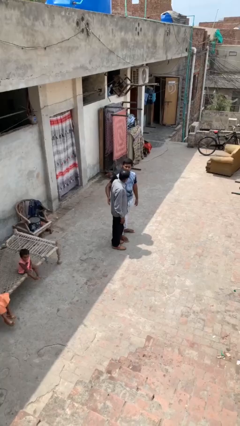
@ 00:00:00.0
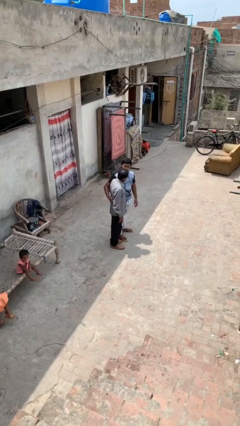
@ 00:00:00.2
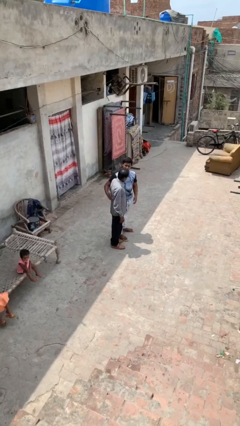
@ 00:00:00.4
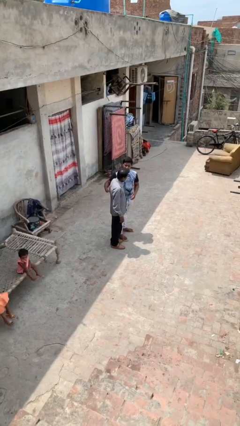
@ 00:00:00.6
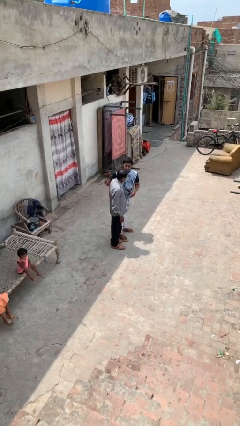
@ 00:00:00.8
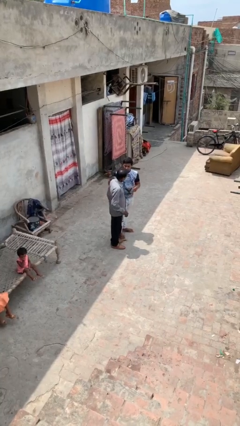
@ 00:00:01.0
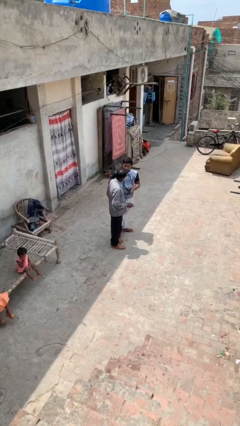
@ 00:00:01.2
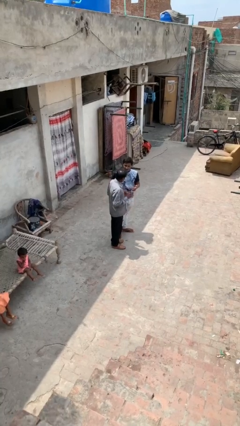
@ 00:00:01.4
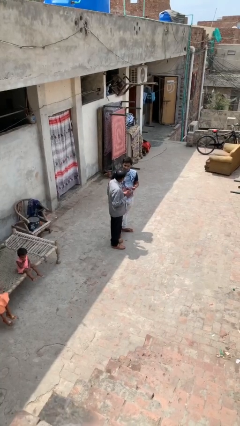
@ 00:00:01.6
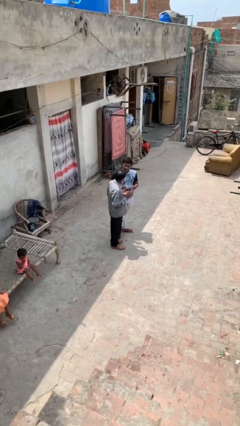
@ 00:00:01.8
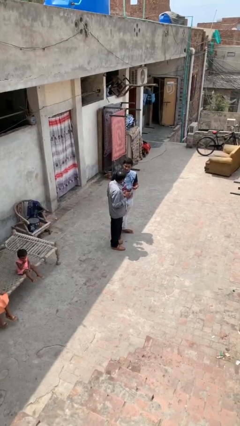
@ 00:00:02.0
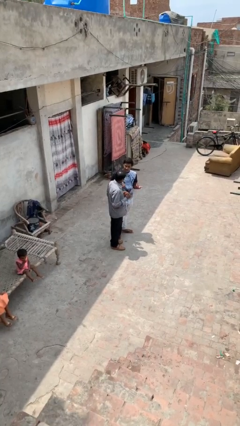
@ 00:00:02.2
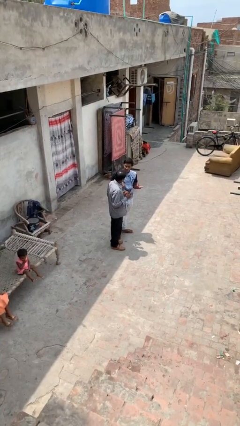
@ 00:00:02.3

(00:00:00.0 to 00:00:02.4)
person embraces person

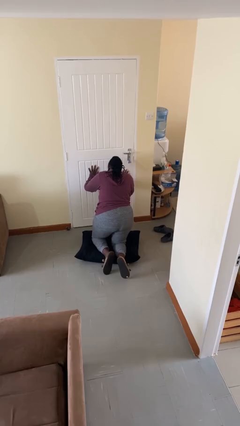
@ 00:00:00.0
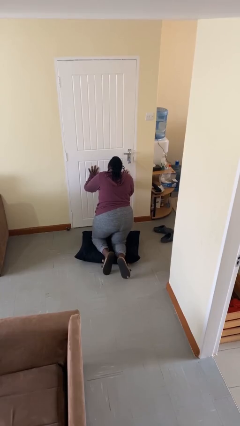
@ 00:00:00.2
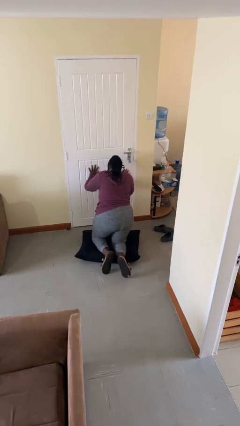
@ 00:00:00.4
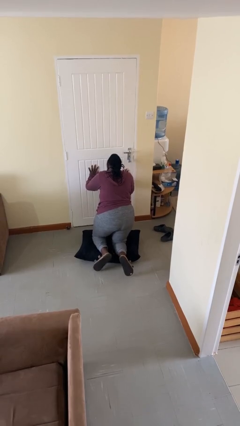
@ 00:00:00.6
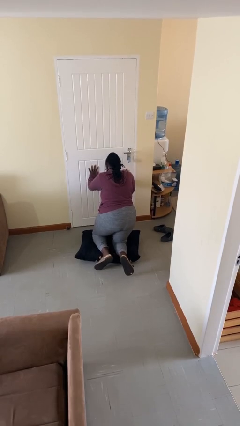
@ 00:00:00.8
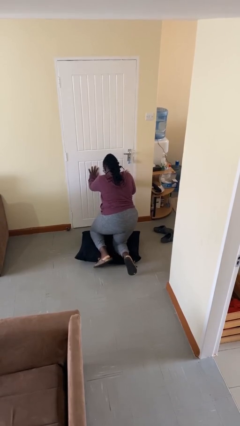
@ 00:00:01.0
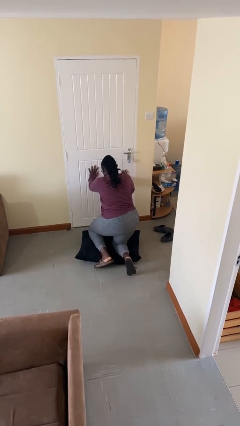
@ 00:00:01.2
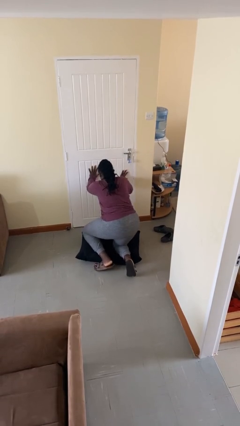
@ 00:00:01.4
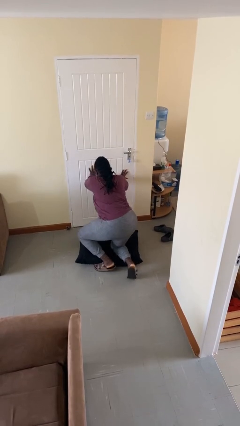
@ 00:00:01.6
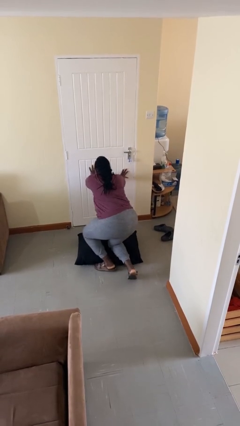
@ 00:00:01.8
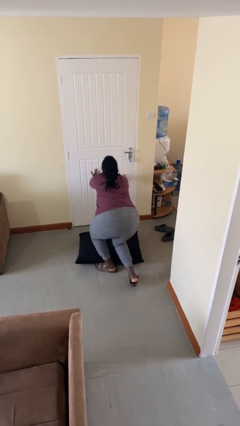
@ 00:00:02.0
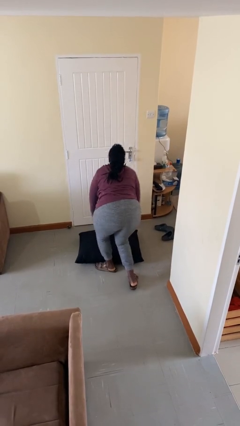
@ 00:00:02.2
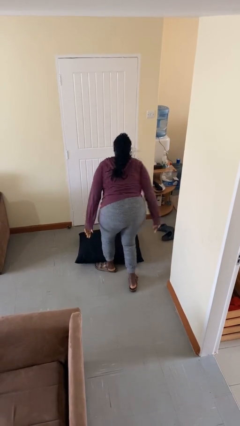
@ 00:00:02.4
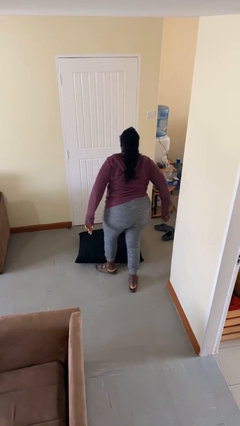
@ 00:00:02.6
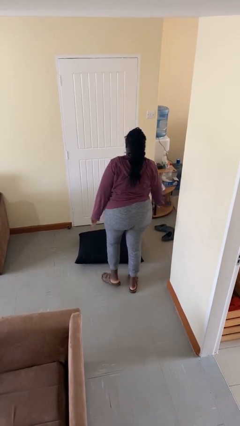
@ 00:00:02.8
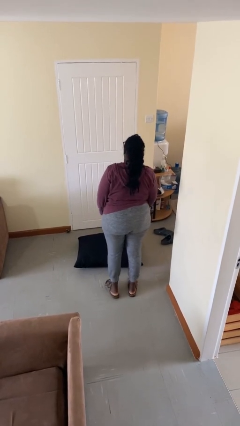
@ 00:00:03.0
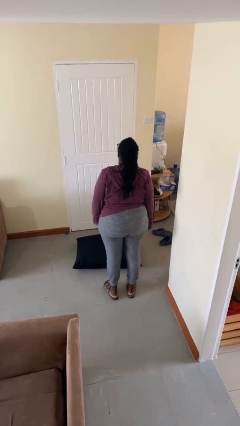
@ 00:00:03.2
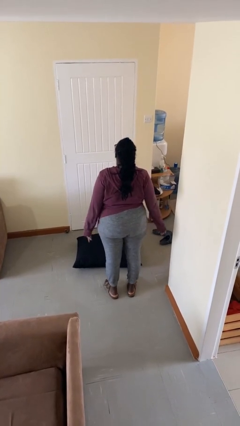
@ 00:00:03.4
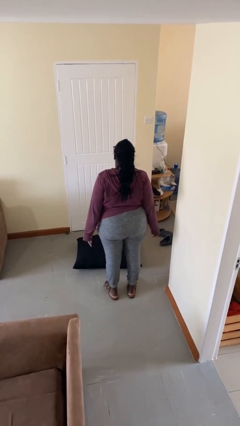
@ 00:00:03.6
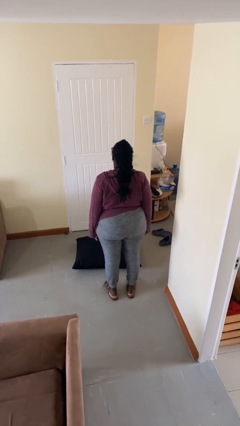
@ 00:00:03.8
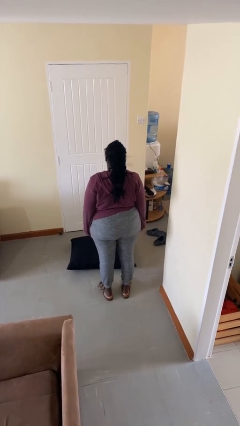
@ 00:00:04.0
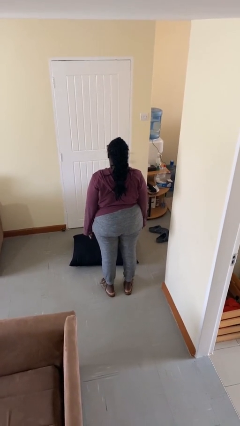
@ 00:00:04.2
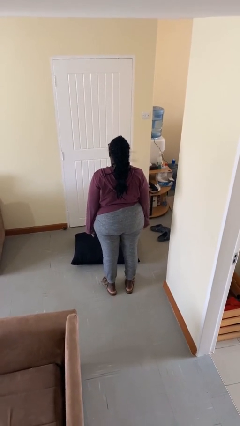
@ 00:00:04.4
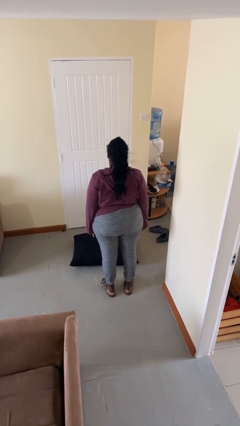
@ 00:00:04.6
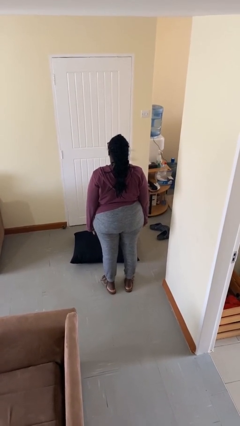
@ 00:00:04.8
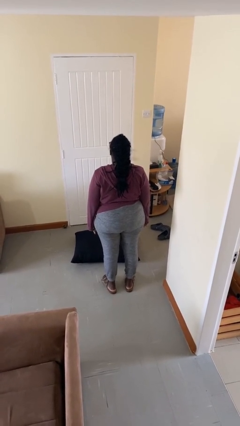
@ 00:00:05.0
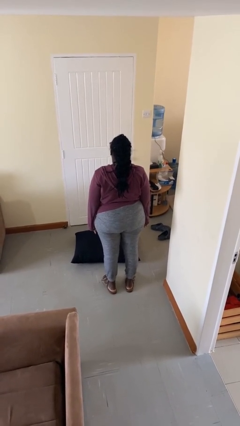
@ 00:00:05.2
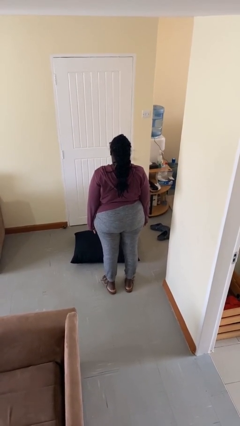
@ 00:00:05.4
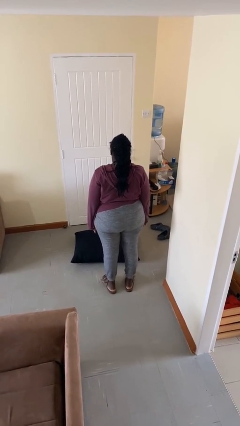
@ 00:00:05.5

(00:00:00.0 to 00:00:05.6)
person stands up from floor

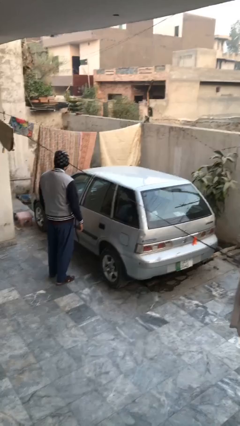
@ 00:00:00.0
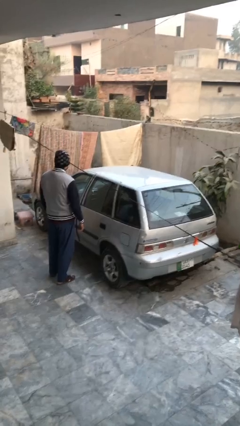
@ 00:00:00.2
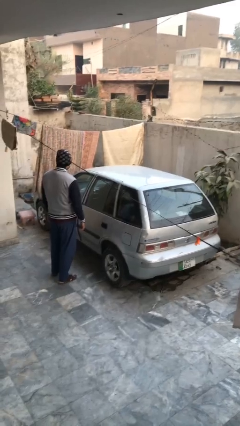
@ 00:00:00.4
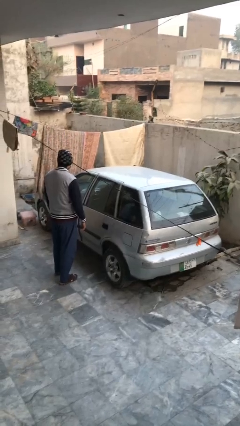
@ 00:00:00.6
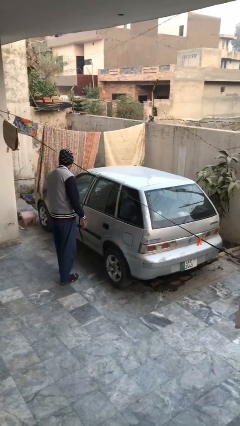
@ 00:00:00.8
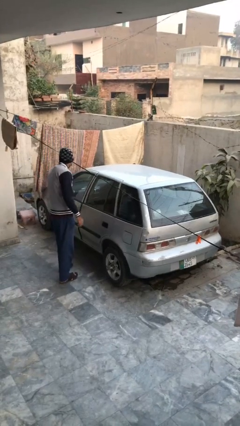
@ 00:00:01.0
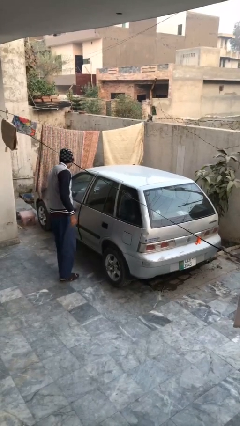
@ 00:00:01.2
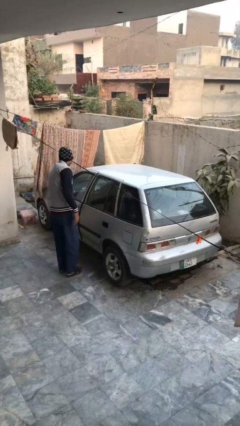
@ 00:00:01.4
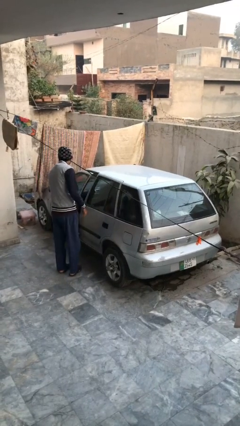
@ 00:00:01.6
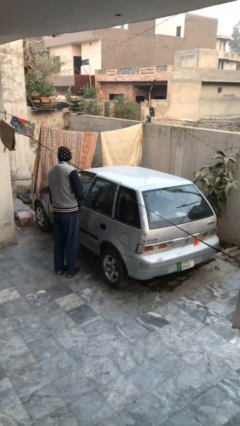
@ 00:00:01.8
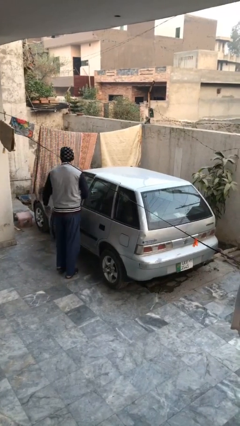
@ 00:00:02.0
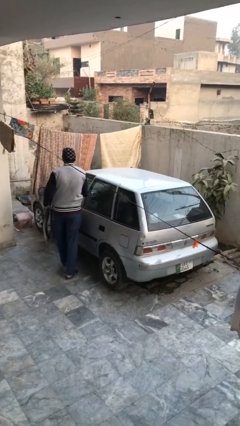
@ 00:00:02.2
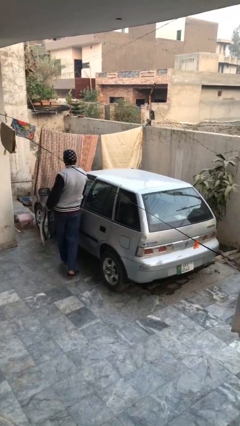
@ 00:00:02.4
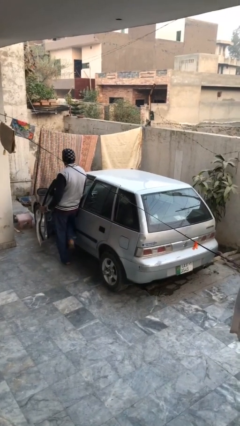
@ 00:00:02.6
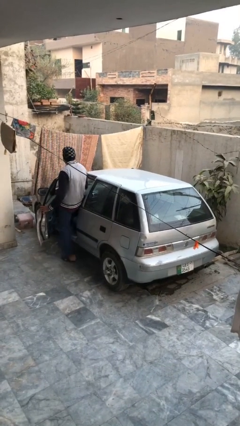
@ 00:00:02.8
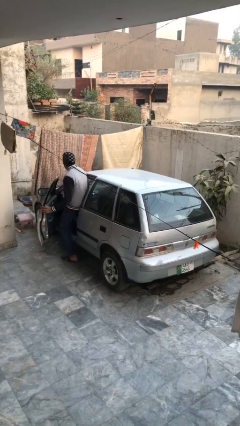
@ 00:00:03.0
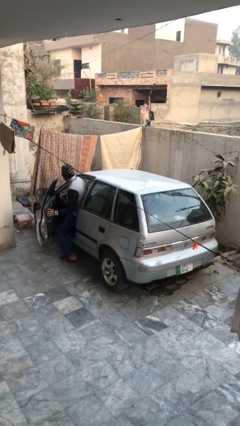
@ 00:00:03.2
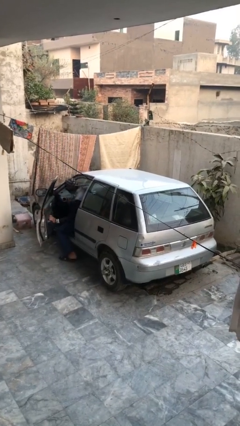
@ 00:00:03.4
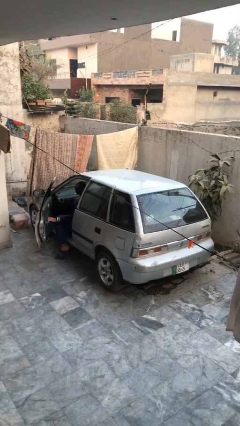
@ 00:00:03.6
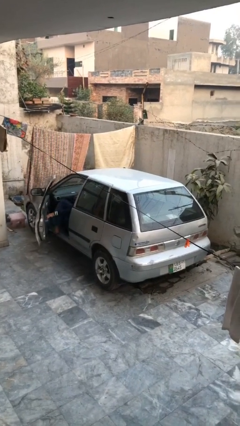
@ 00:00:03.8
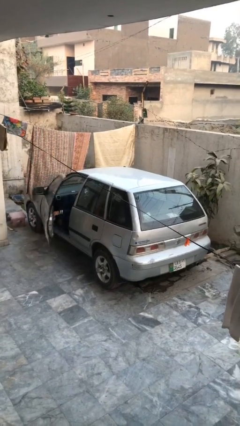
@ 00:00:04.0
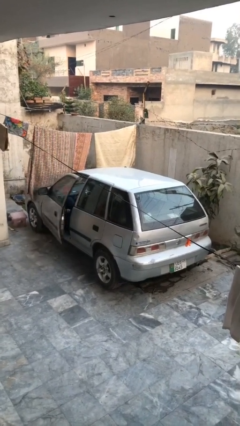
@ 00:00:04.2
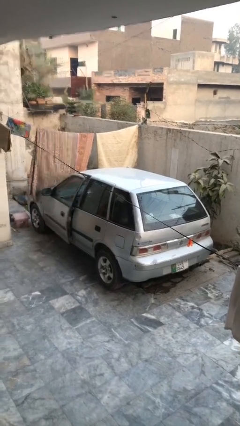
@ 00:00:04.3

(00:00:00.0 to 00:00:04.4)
car picks up person

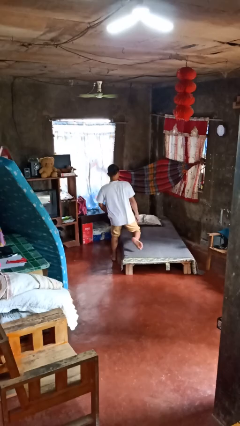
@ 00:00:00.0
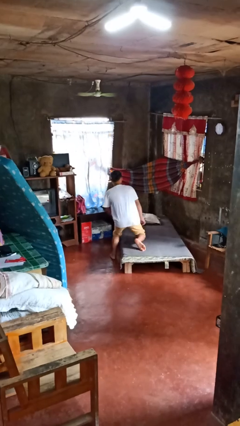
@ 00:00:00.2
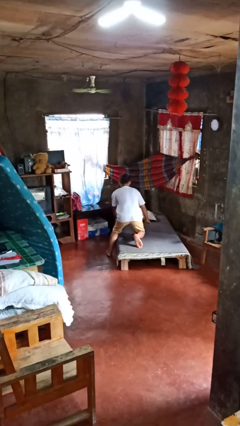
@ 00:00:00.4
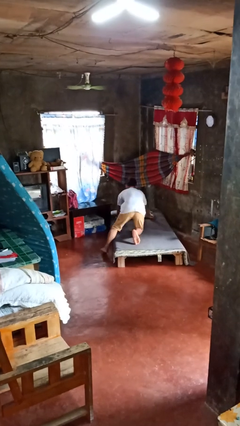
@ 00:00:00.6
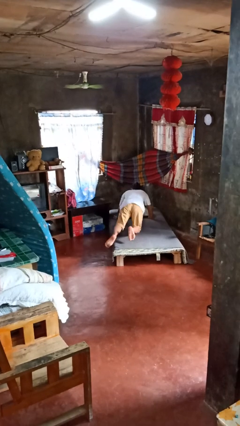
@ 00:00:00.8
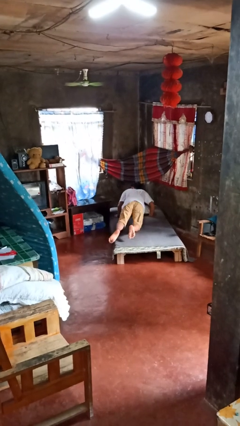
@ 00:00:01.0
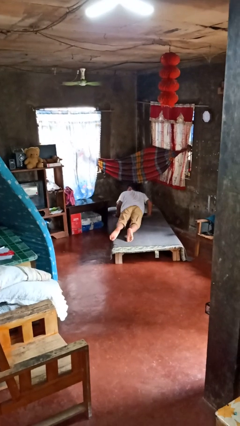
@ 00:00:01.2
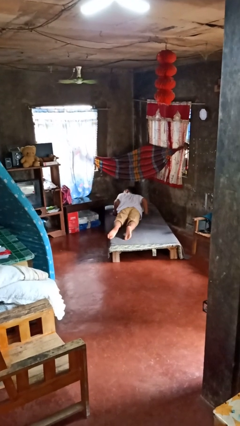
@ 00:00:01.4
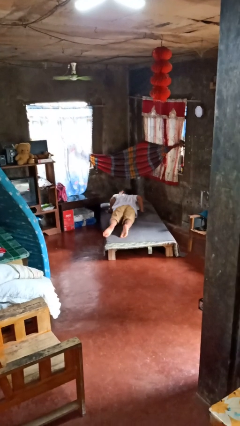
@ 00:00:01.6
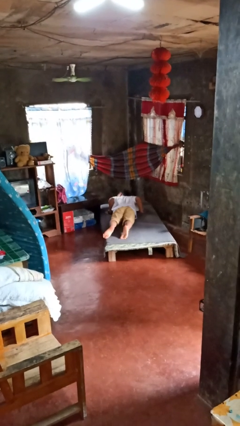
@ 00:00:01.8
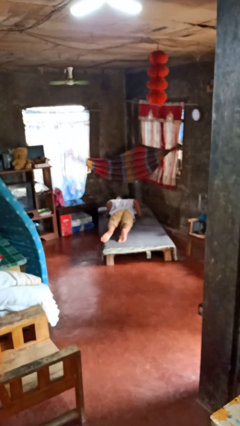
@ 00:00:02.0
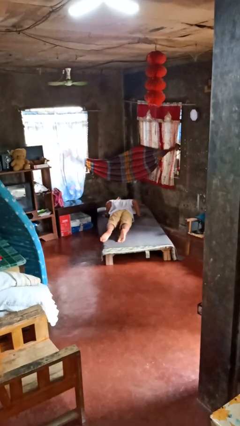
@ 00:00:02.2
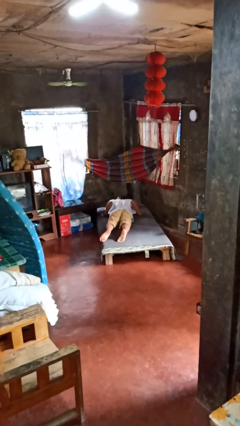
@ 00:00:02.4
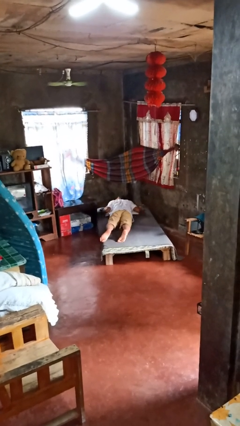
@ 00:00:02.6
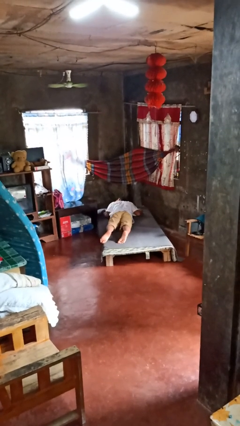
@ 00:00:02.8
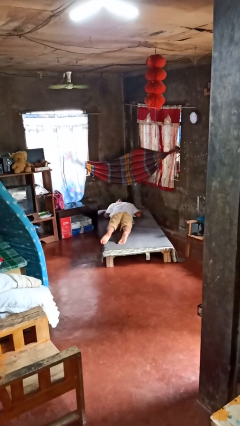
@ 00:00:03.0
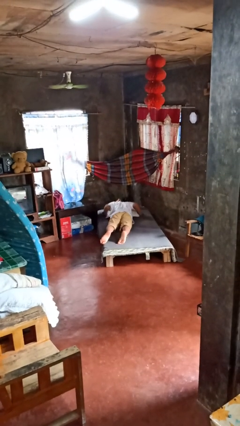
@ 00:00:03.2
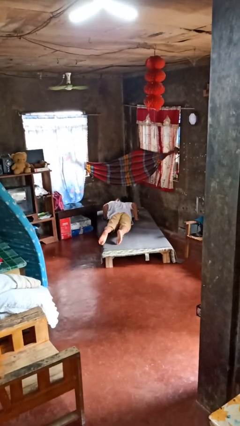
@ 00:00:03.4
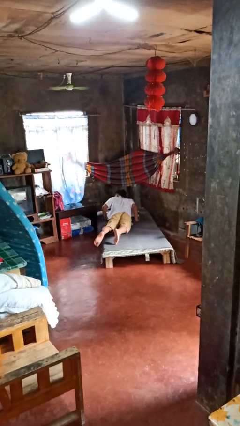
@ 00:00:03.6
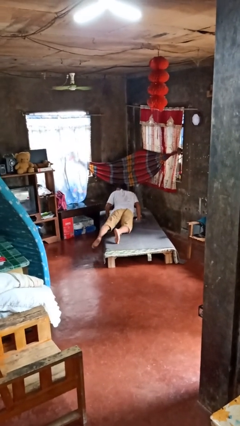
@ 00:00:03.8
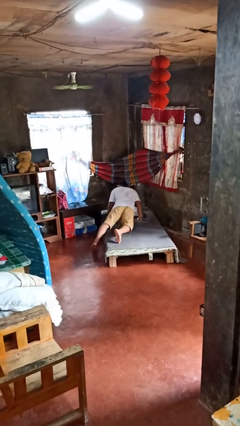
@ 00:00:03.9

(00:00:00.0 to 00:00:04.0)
person lies down on bed

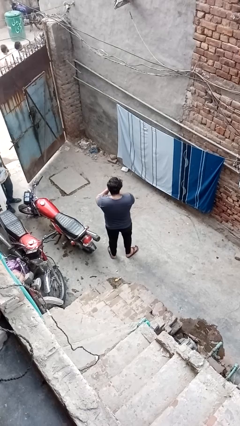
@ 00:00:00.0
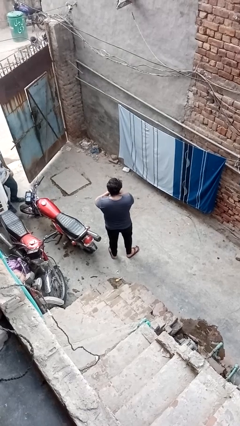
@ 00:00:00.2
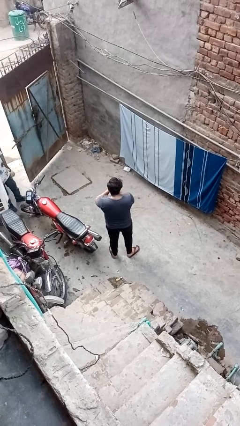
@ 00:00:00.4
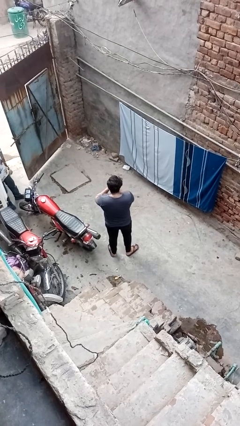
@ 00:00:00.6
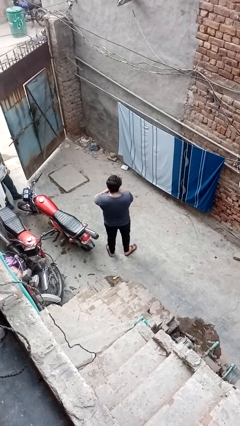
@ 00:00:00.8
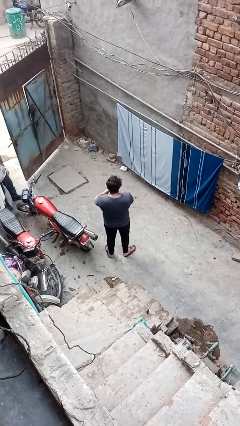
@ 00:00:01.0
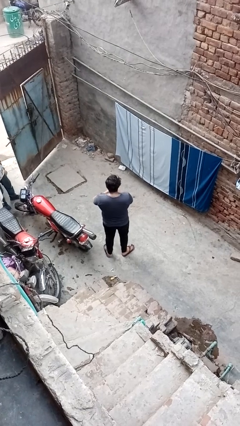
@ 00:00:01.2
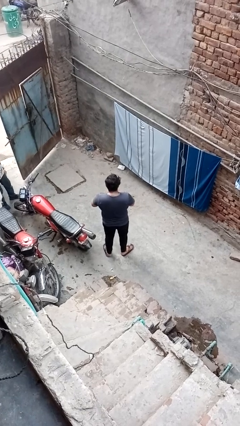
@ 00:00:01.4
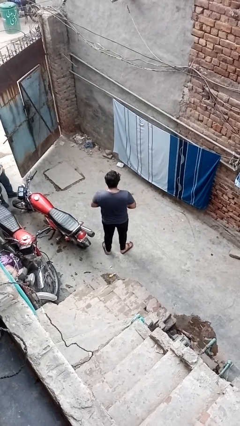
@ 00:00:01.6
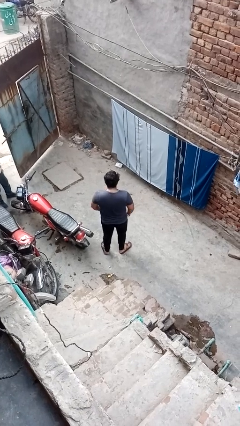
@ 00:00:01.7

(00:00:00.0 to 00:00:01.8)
person blows into hands
